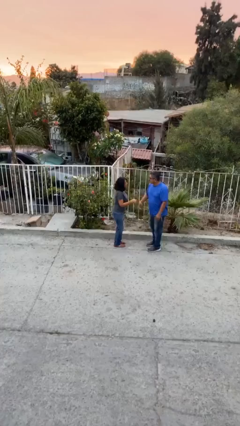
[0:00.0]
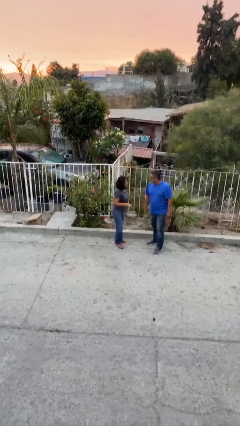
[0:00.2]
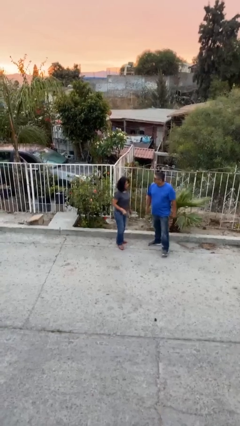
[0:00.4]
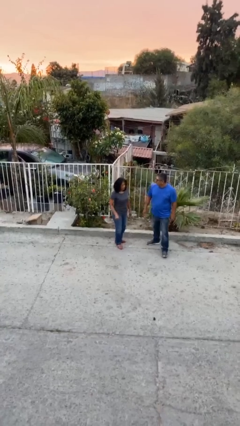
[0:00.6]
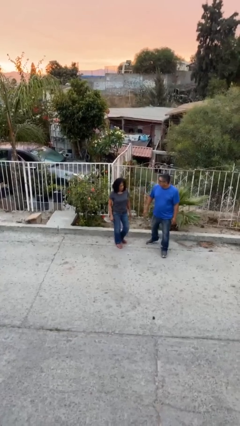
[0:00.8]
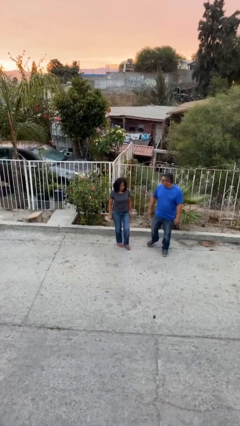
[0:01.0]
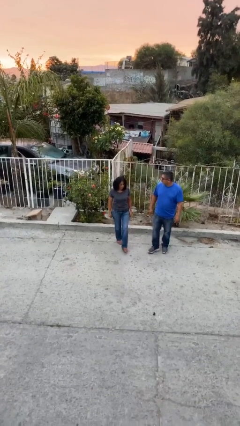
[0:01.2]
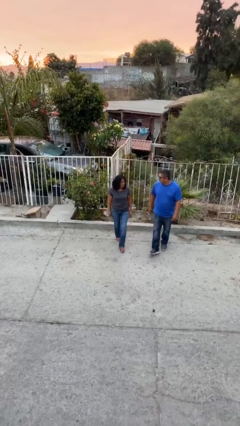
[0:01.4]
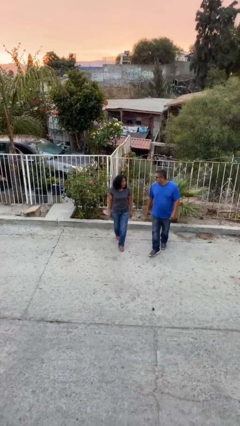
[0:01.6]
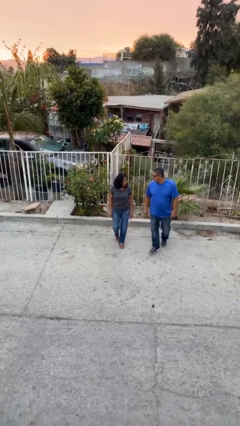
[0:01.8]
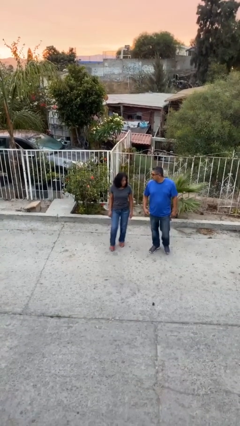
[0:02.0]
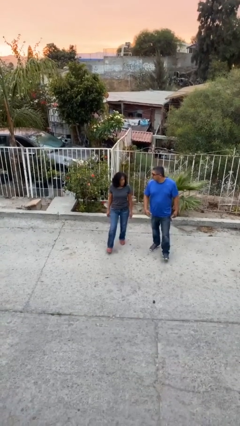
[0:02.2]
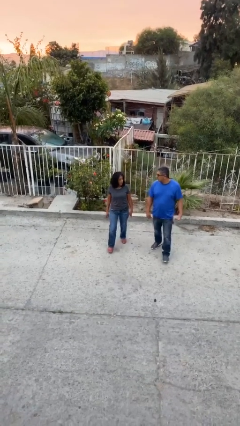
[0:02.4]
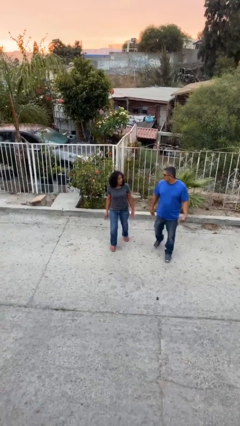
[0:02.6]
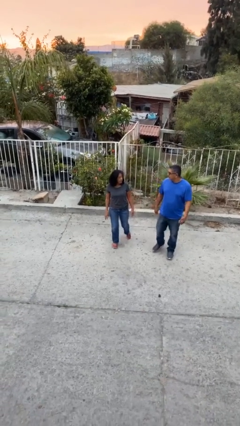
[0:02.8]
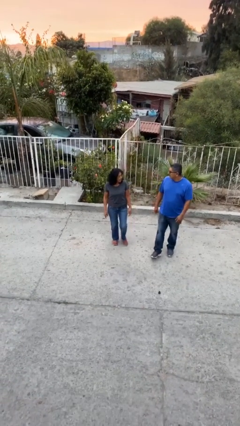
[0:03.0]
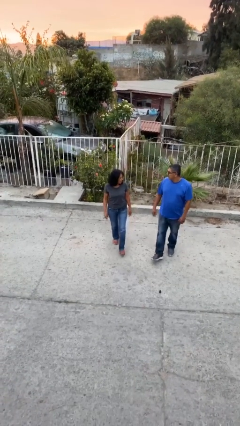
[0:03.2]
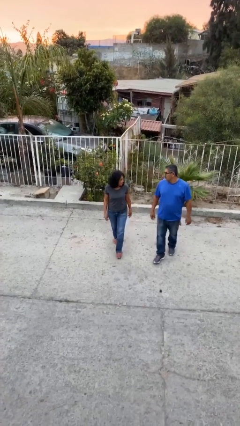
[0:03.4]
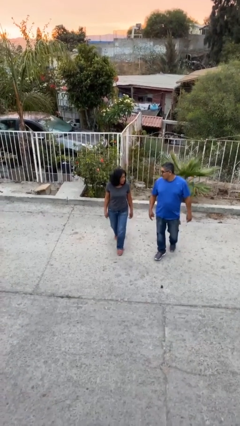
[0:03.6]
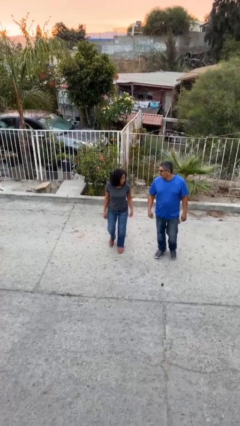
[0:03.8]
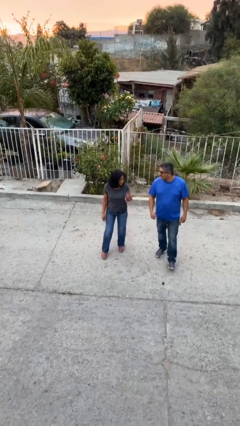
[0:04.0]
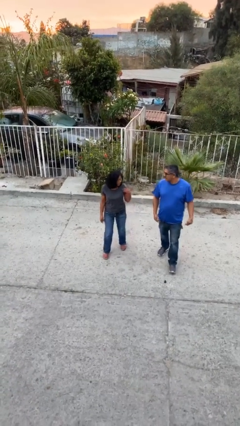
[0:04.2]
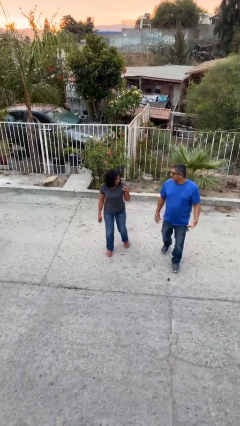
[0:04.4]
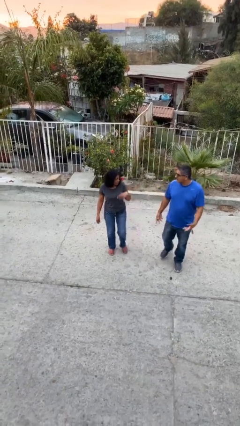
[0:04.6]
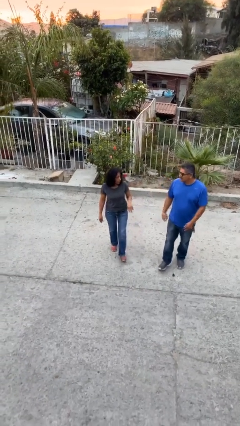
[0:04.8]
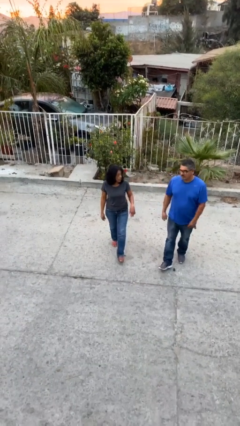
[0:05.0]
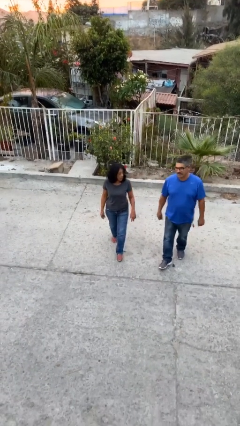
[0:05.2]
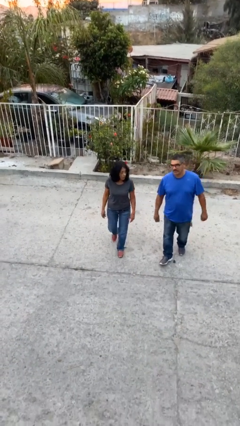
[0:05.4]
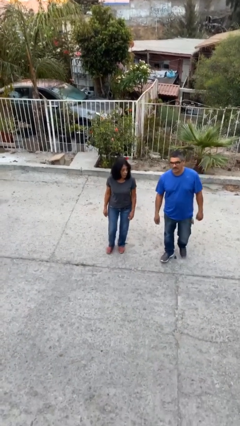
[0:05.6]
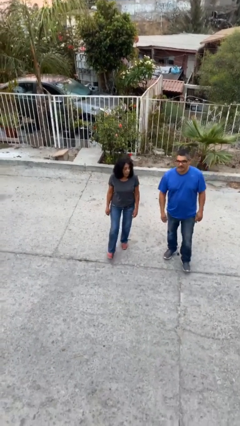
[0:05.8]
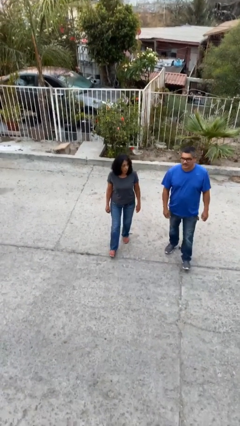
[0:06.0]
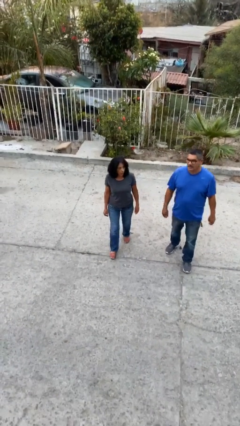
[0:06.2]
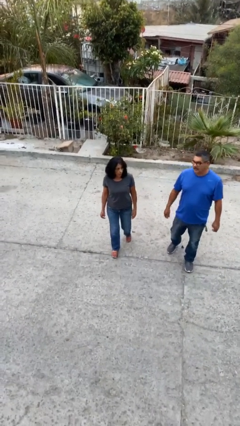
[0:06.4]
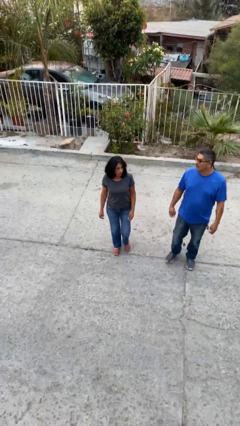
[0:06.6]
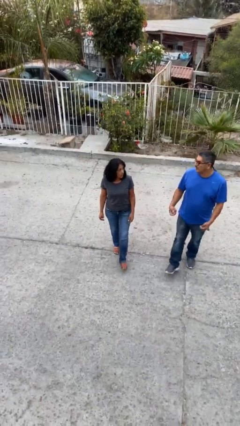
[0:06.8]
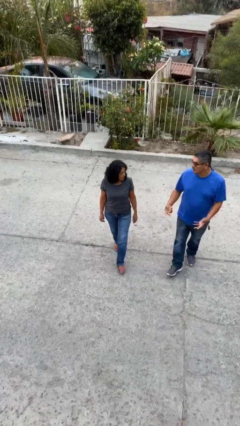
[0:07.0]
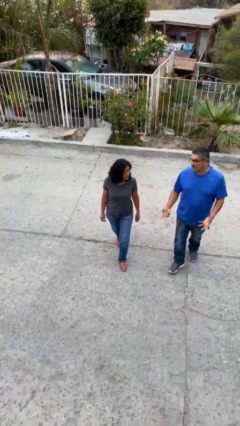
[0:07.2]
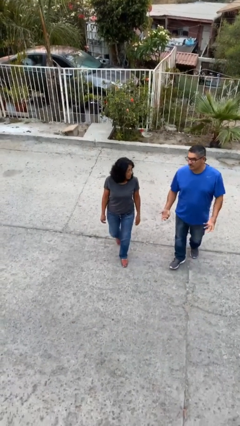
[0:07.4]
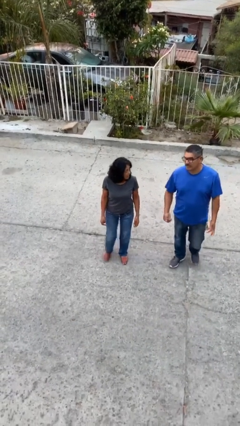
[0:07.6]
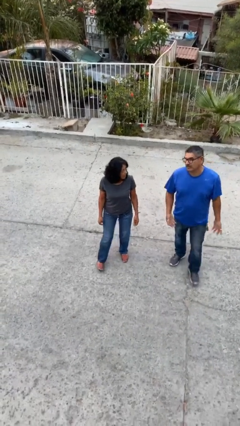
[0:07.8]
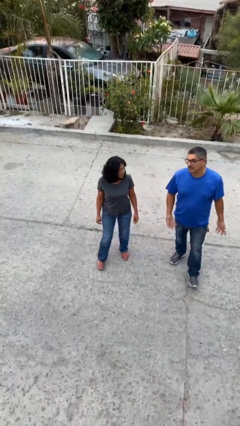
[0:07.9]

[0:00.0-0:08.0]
person talks to person

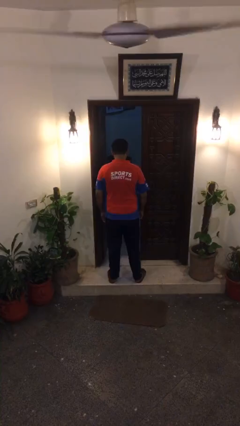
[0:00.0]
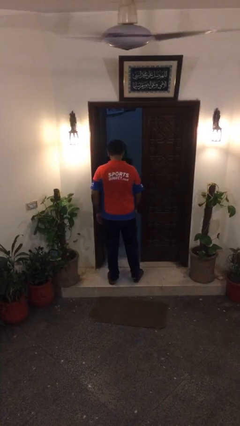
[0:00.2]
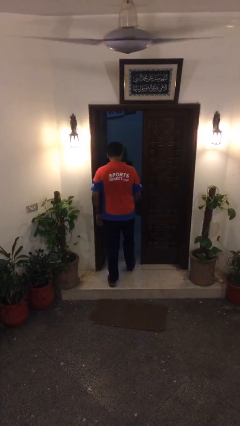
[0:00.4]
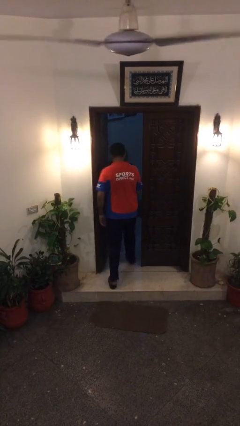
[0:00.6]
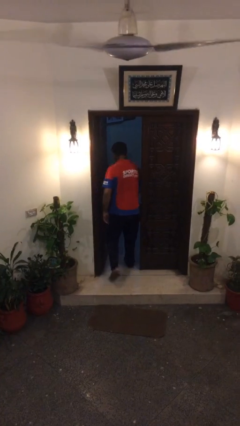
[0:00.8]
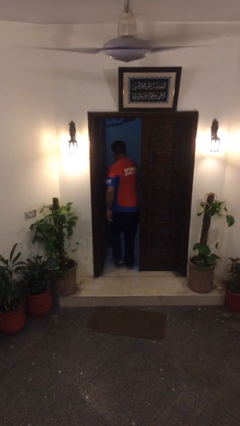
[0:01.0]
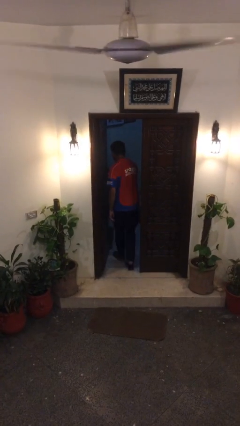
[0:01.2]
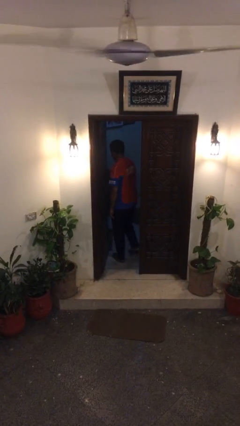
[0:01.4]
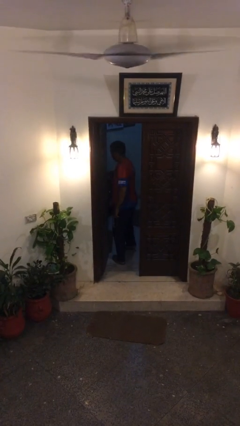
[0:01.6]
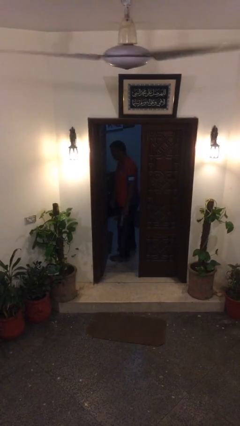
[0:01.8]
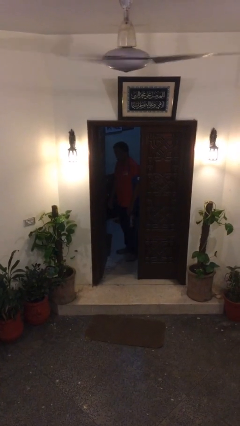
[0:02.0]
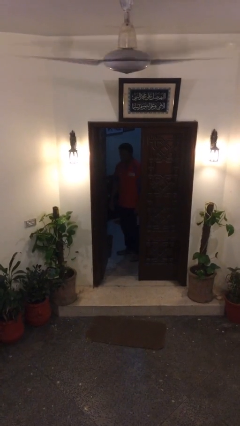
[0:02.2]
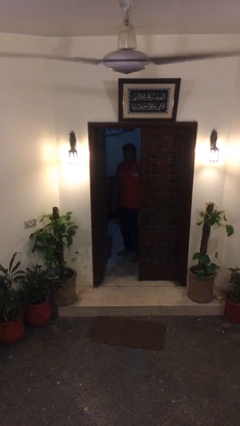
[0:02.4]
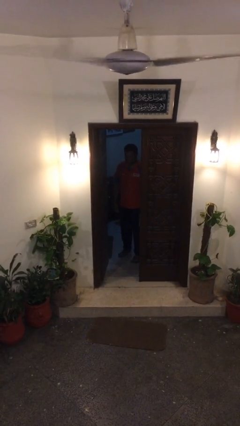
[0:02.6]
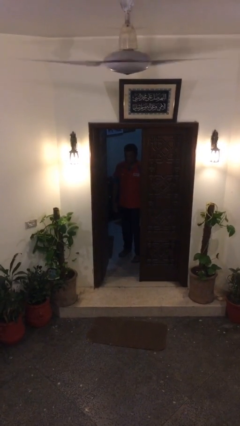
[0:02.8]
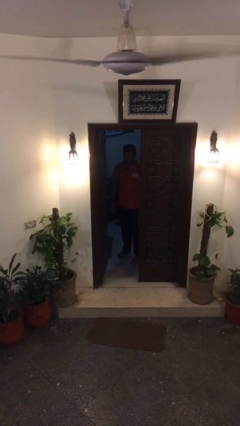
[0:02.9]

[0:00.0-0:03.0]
person exits scene through structure

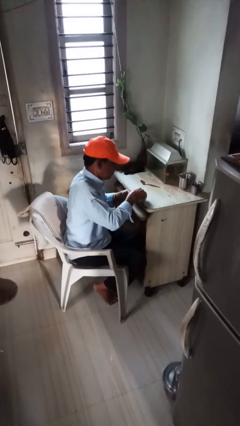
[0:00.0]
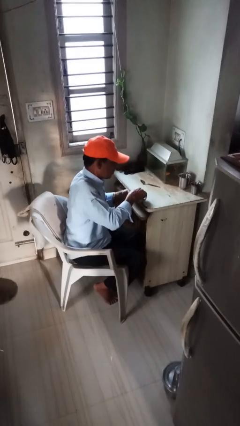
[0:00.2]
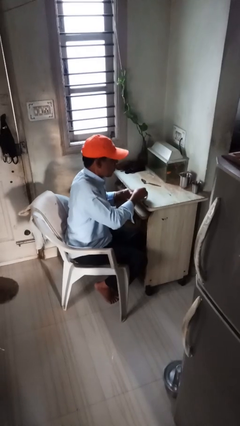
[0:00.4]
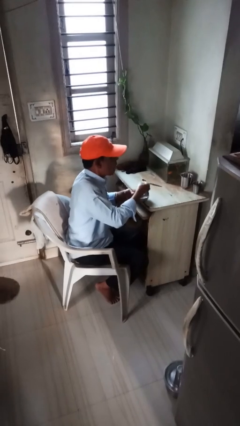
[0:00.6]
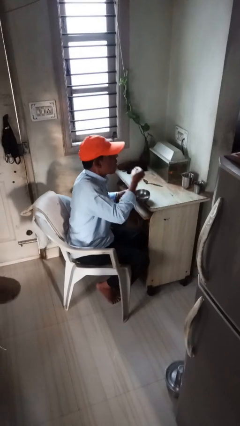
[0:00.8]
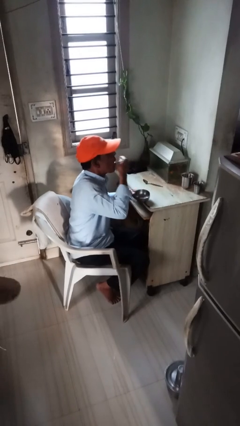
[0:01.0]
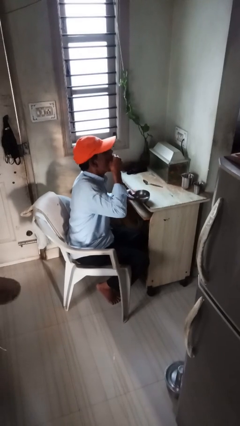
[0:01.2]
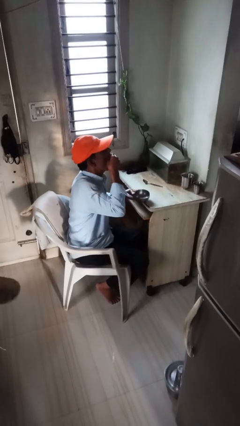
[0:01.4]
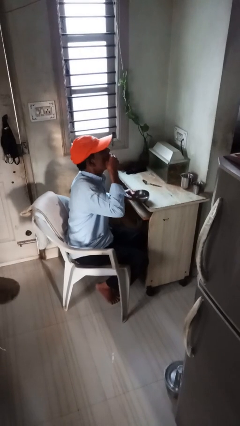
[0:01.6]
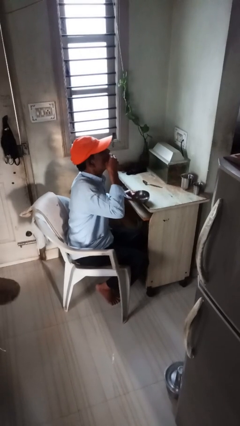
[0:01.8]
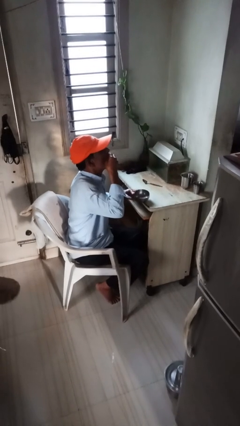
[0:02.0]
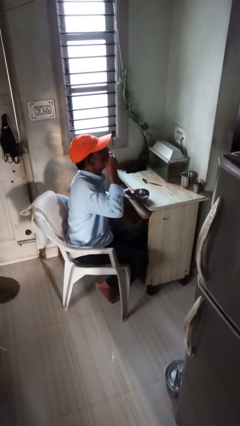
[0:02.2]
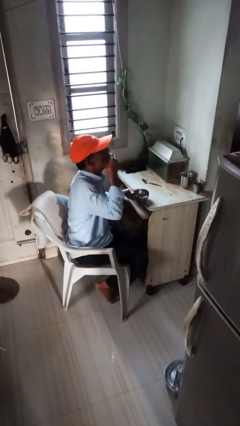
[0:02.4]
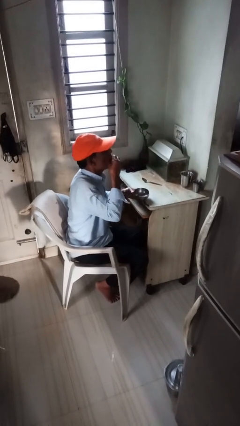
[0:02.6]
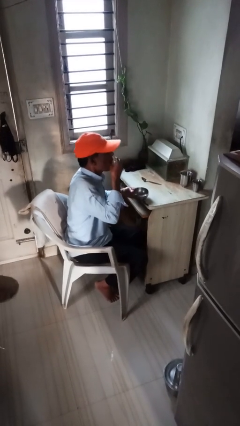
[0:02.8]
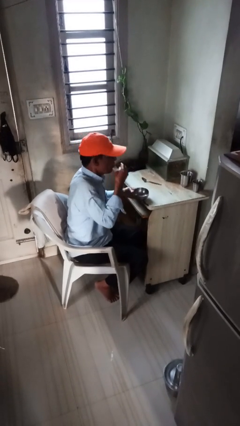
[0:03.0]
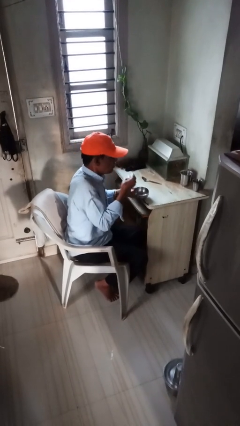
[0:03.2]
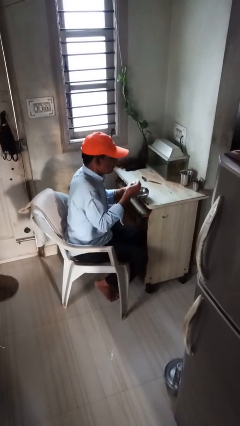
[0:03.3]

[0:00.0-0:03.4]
person eats with hands

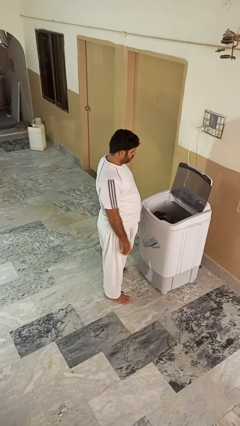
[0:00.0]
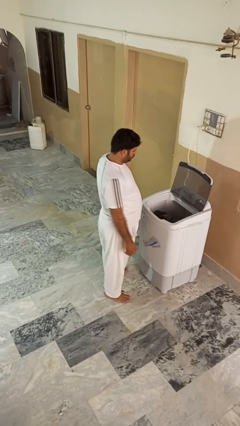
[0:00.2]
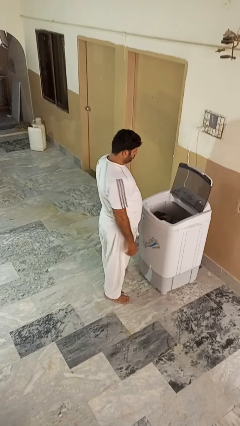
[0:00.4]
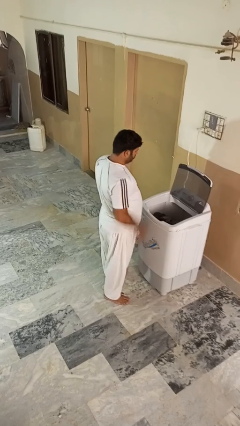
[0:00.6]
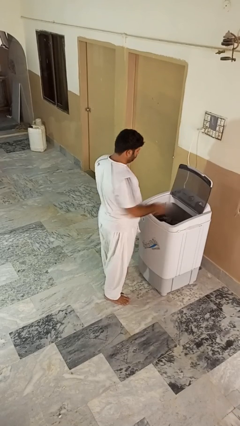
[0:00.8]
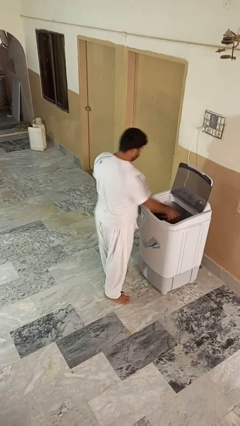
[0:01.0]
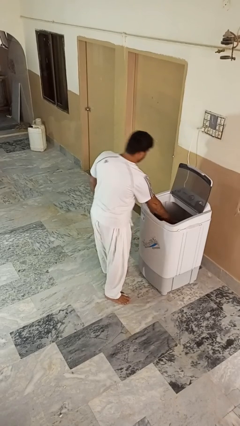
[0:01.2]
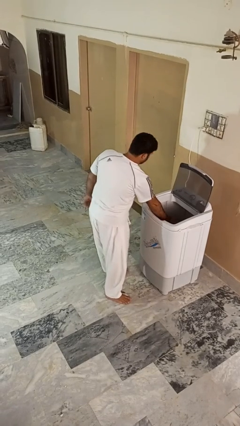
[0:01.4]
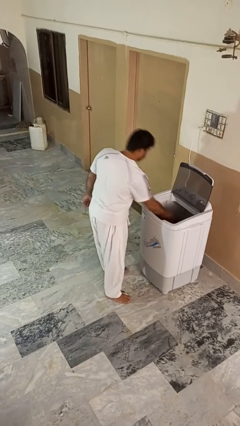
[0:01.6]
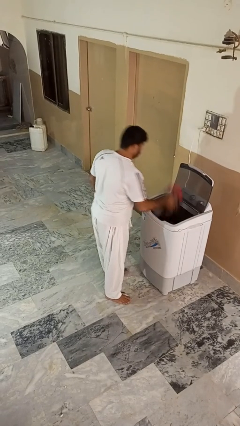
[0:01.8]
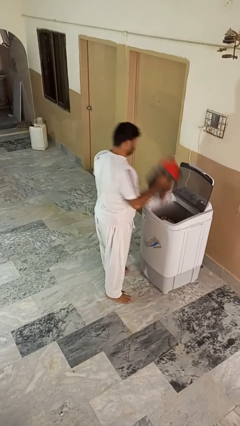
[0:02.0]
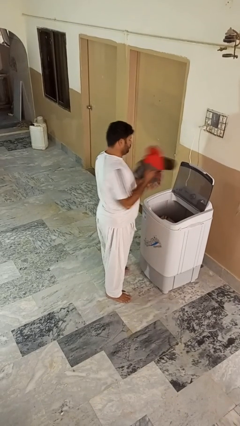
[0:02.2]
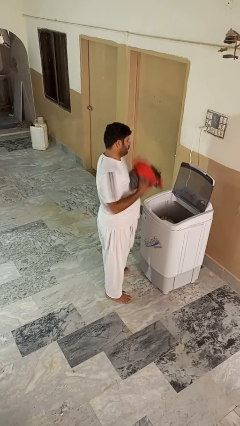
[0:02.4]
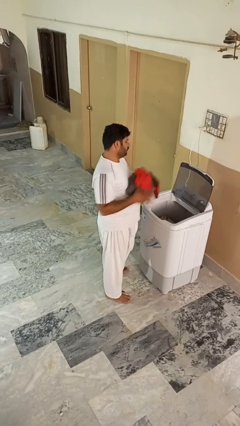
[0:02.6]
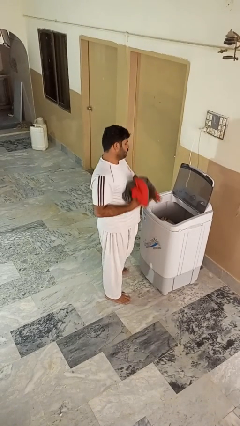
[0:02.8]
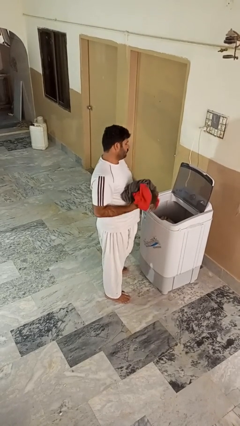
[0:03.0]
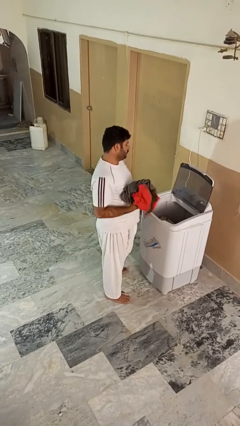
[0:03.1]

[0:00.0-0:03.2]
person unloads clotheswasher

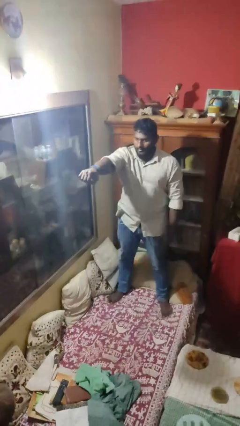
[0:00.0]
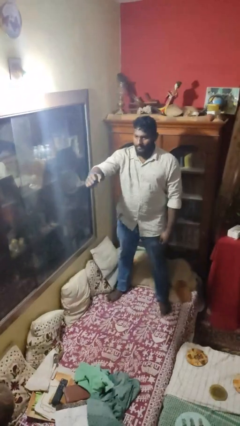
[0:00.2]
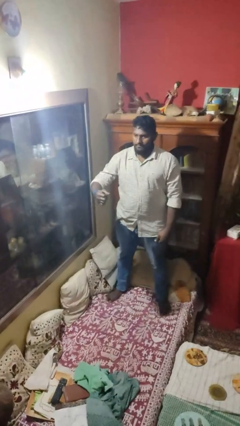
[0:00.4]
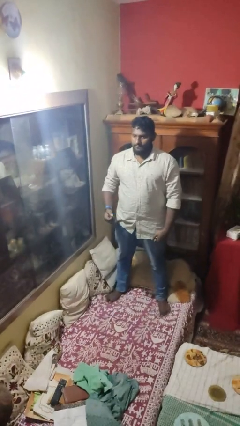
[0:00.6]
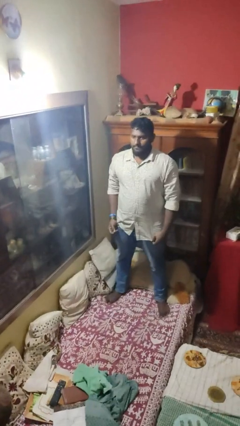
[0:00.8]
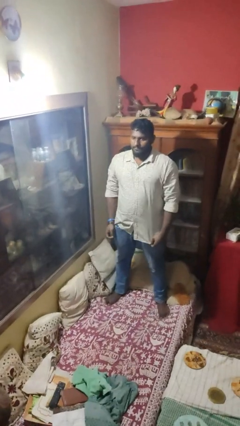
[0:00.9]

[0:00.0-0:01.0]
person punches
